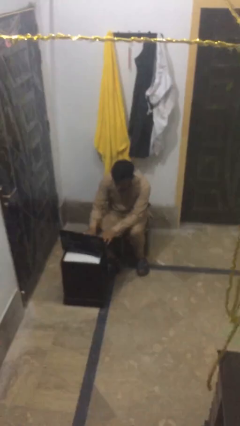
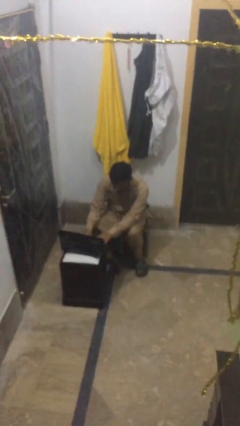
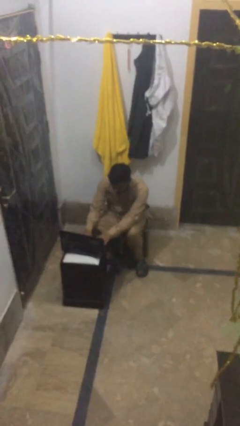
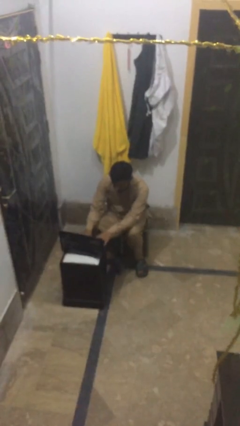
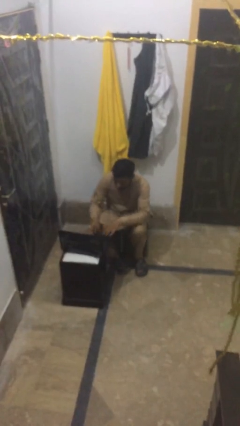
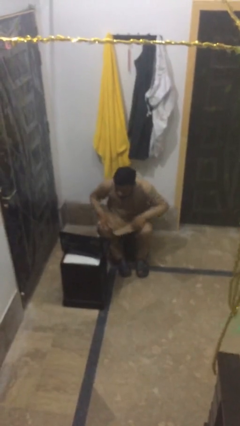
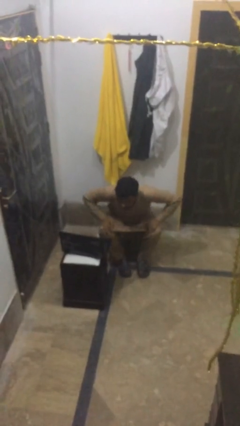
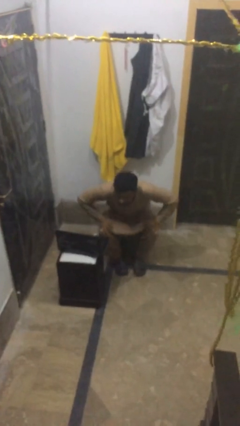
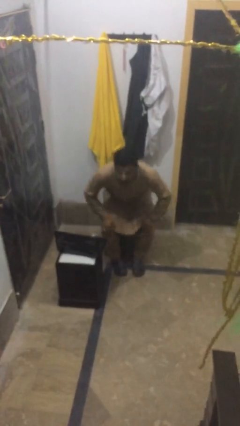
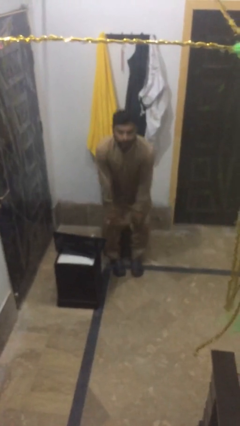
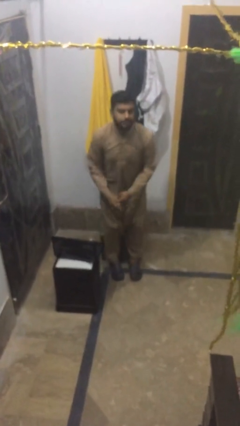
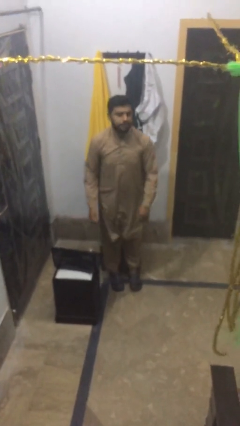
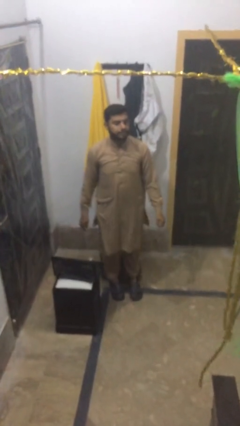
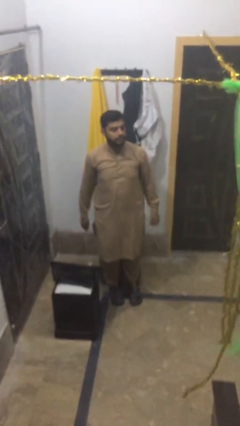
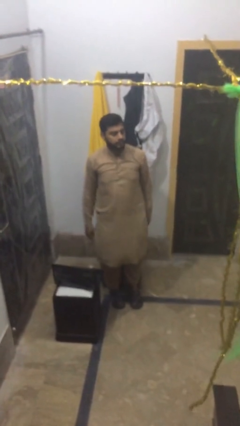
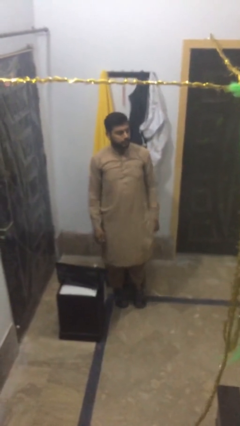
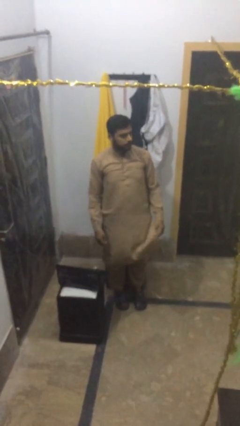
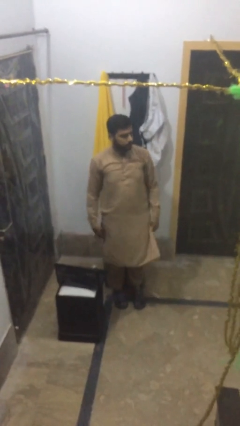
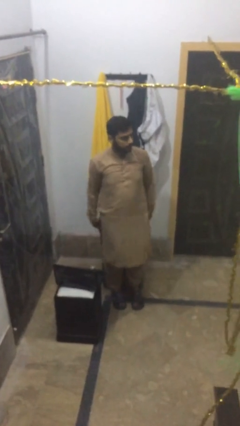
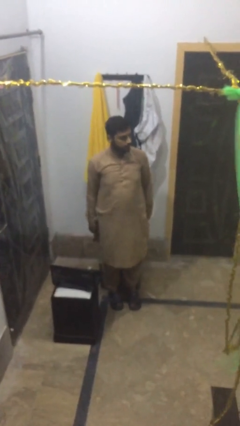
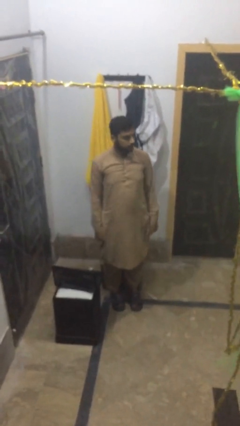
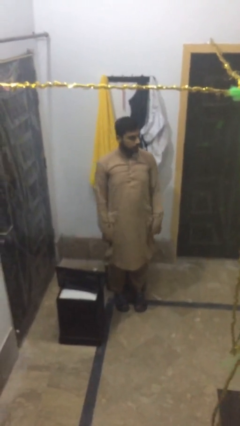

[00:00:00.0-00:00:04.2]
person stands up

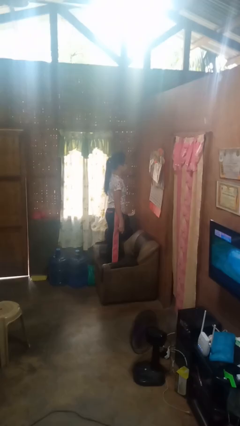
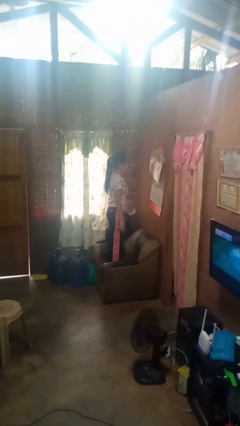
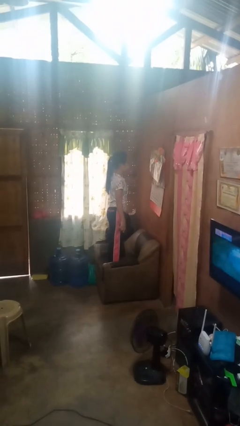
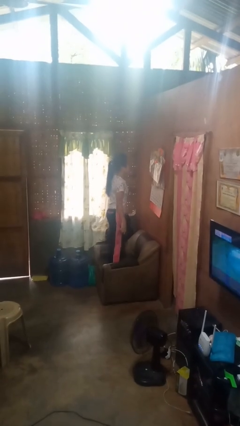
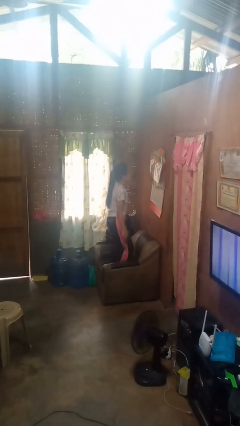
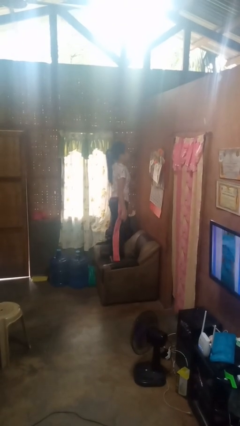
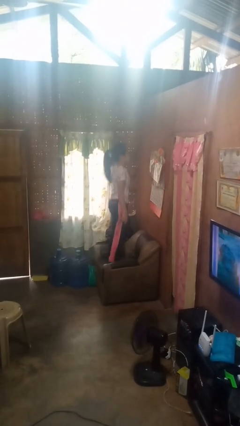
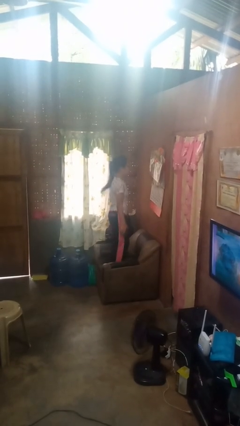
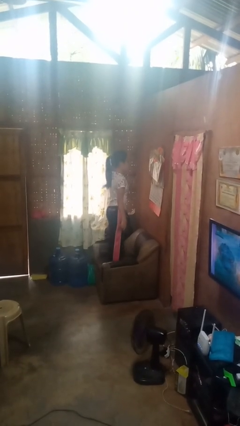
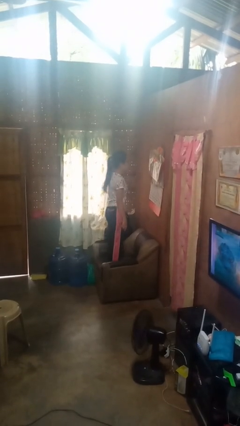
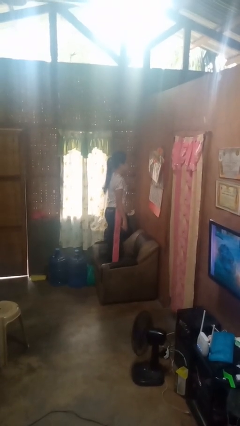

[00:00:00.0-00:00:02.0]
person jumps on couch

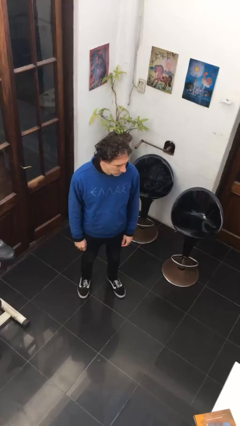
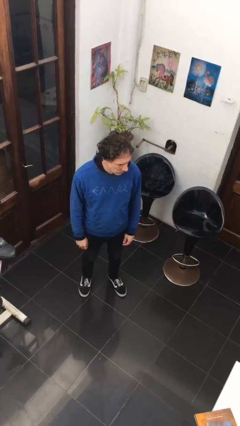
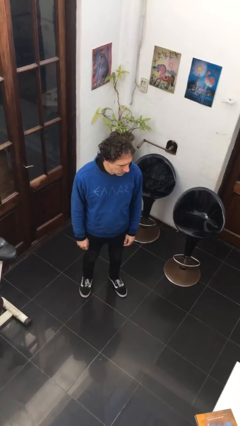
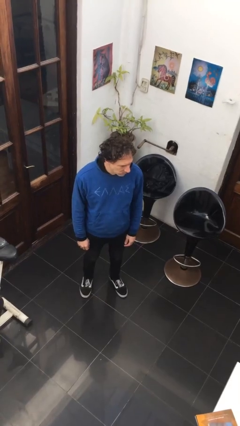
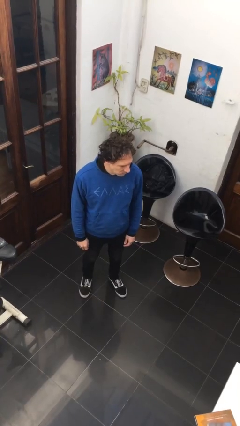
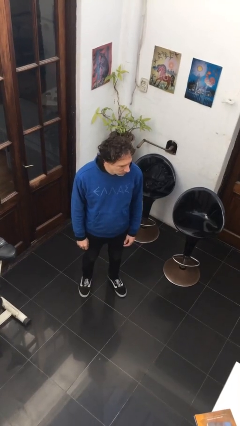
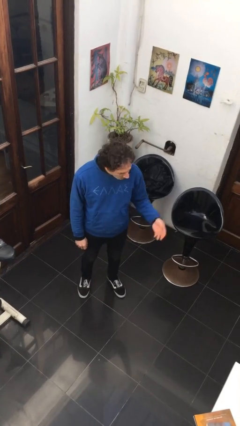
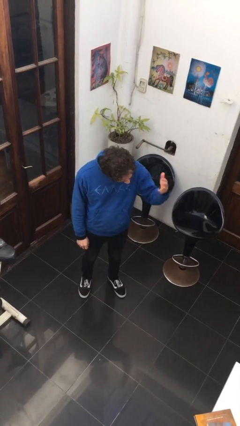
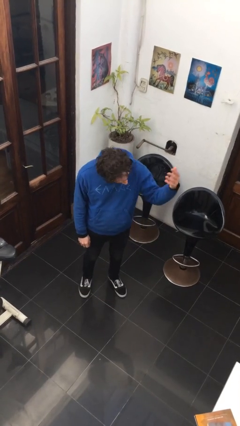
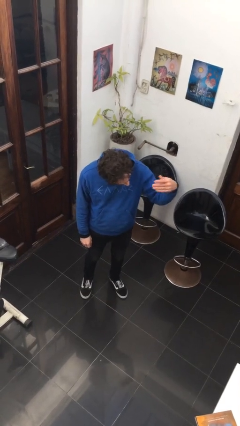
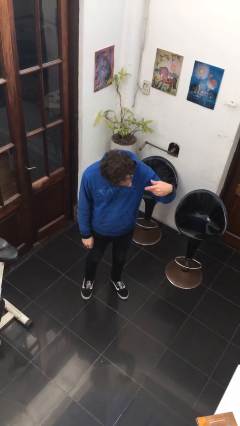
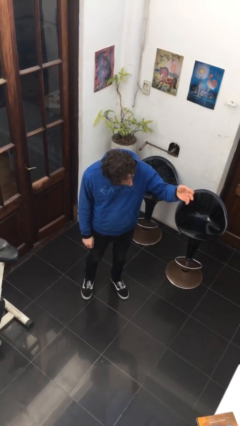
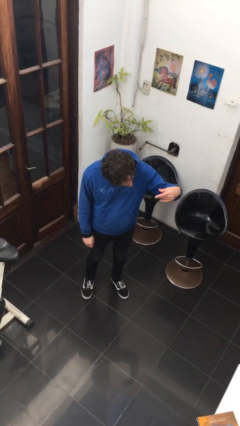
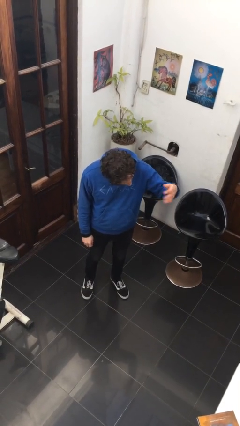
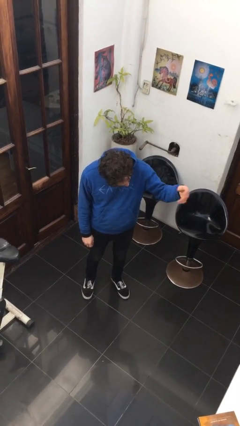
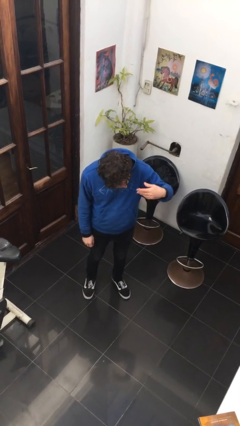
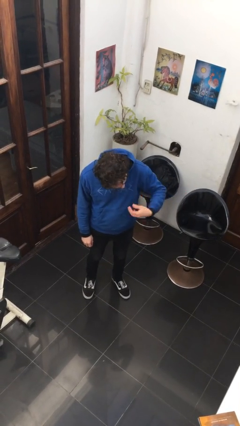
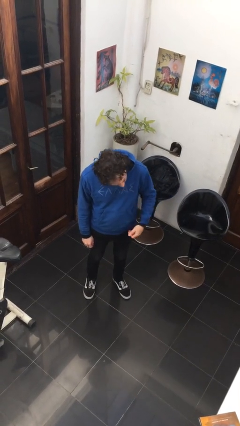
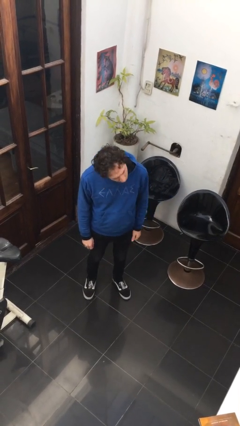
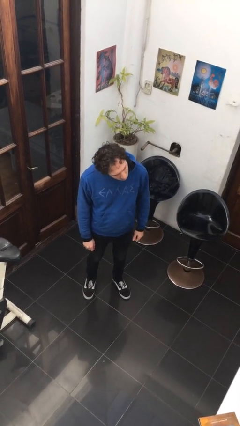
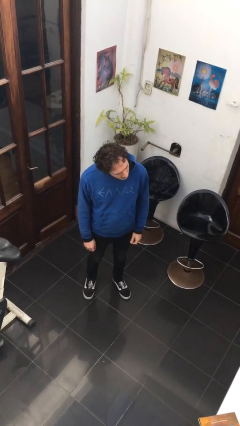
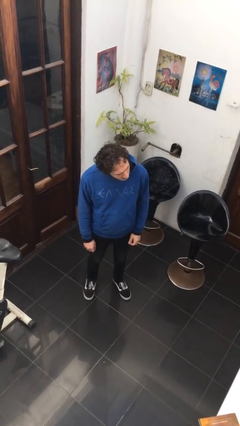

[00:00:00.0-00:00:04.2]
person gestures come here

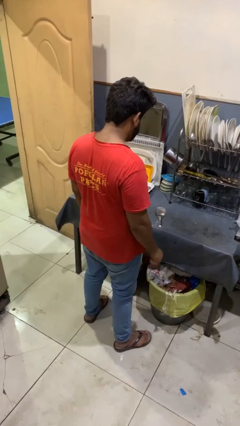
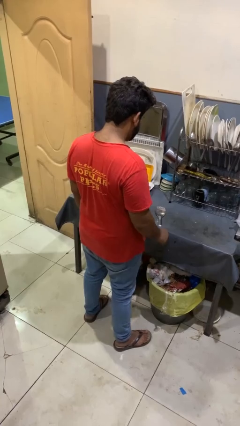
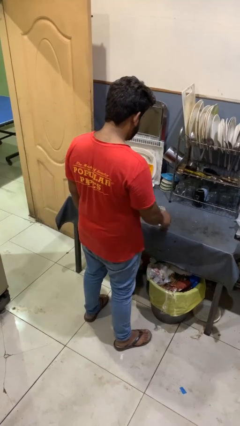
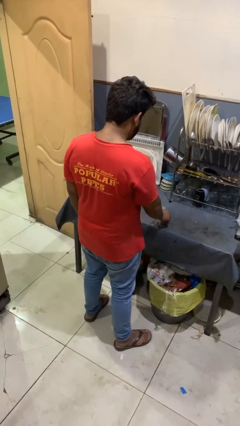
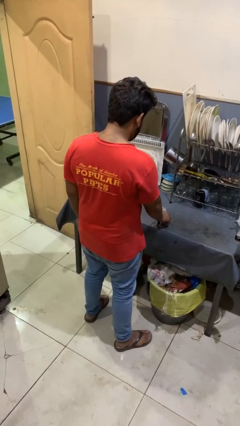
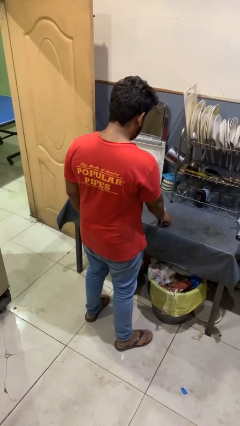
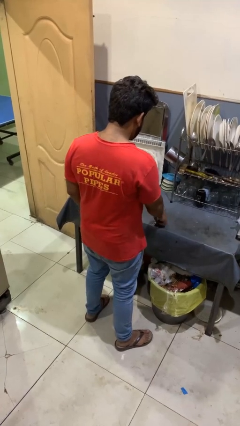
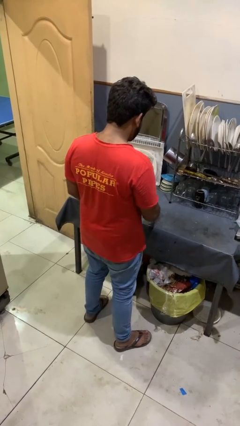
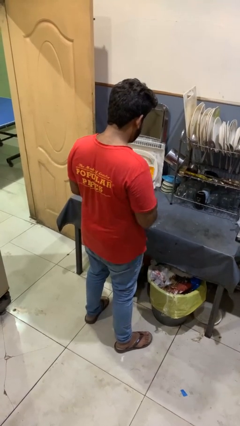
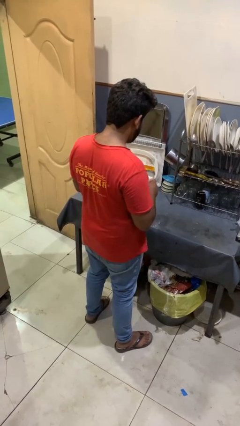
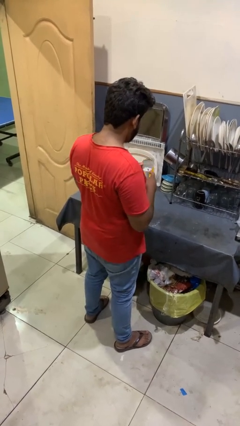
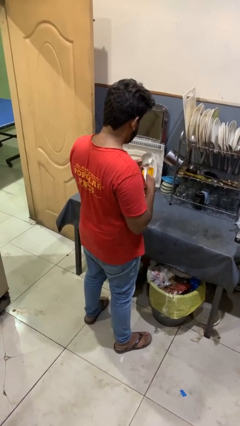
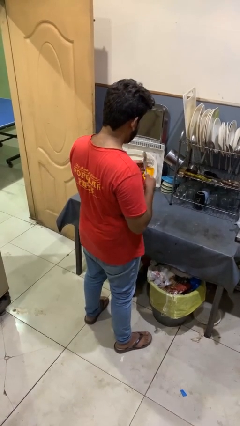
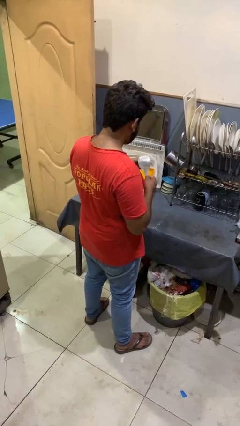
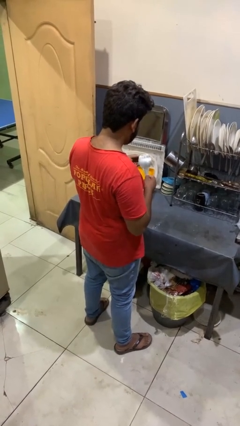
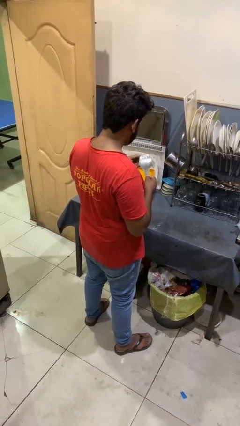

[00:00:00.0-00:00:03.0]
person picks up object from countertop

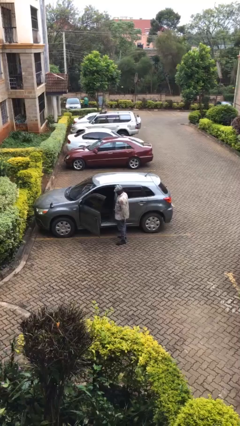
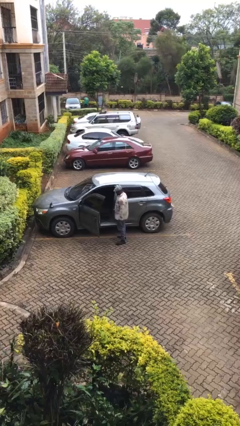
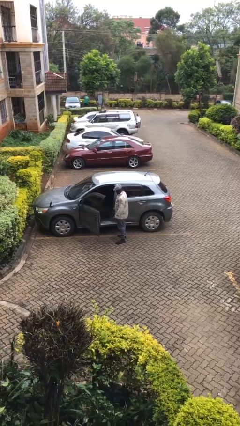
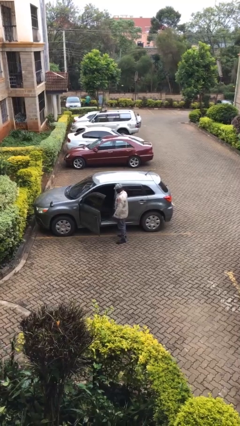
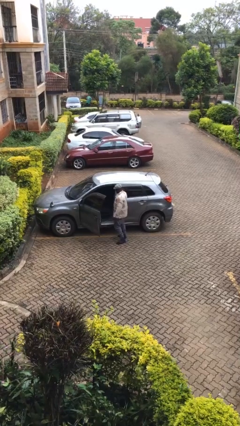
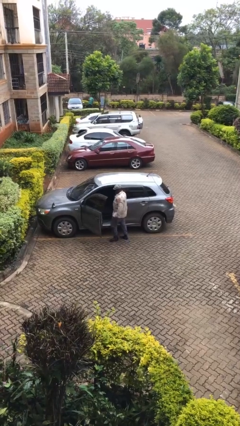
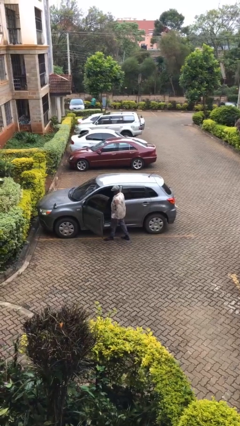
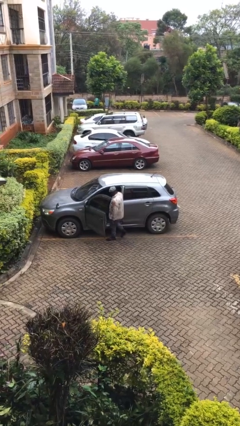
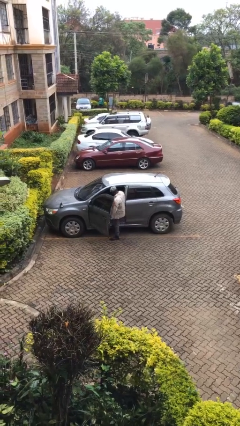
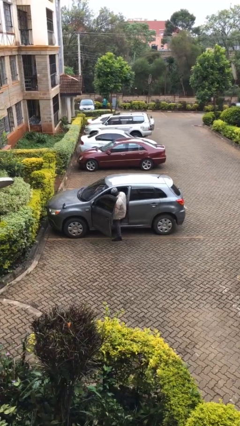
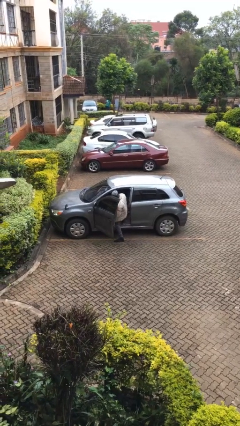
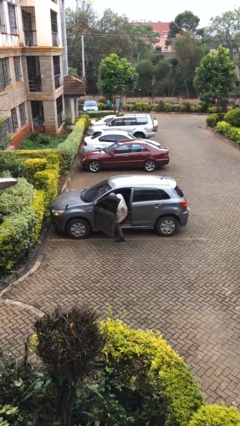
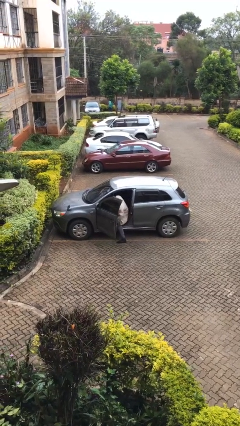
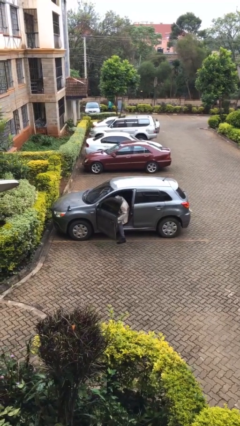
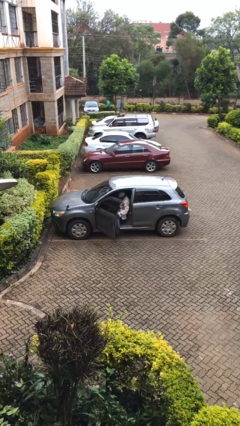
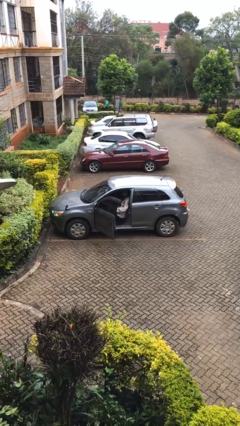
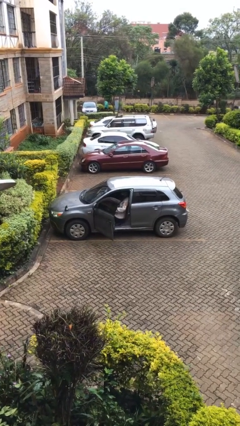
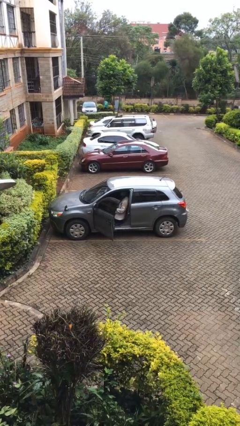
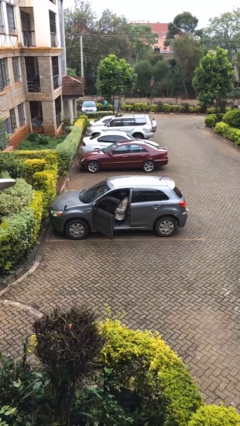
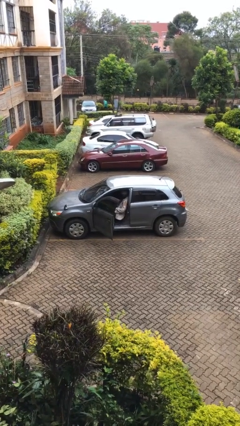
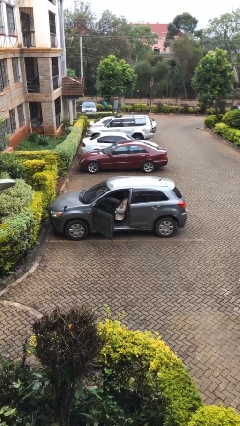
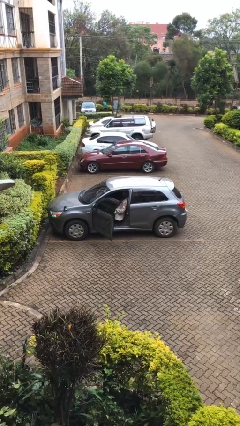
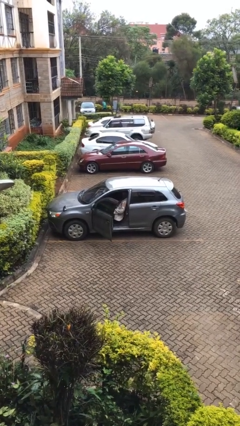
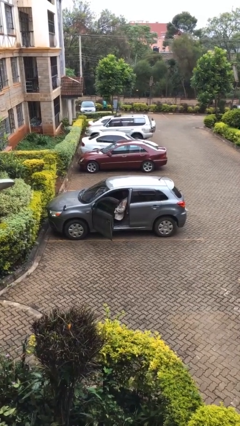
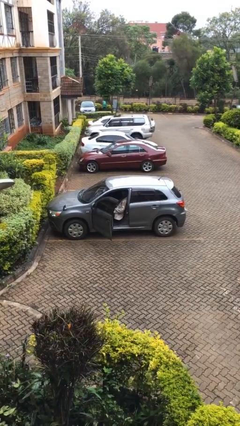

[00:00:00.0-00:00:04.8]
person enters car
